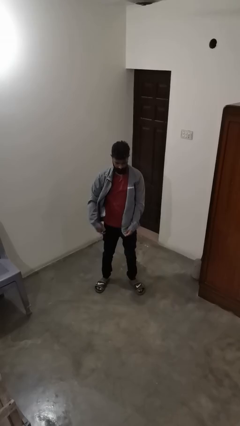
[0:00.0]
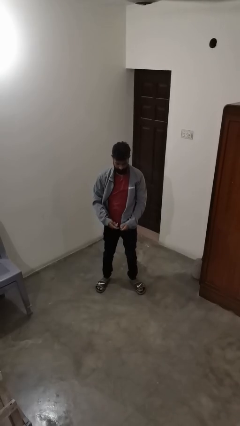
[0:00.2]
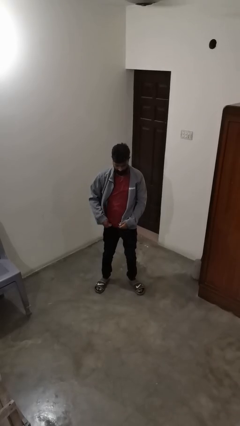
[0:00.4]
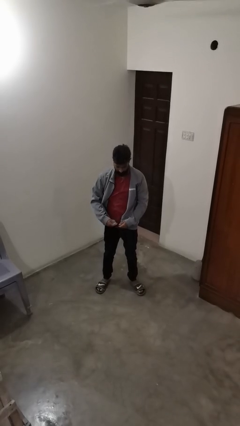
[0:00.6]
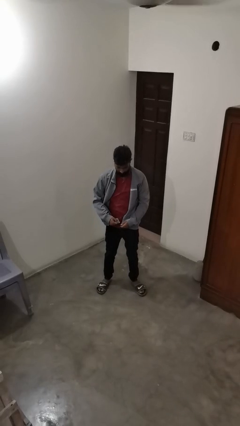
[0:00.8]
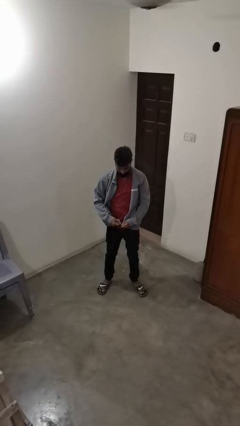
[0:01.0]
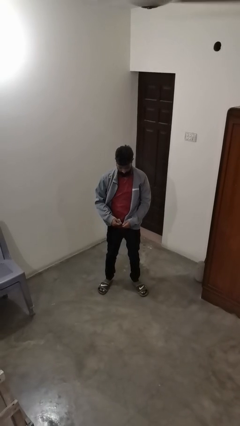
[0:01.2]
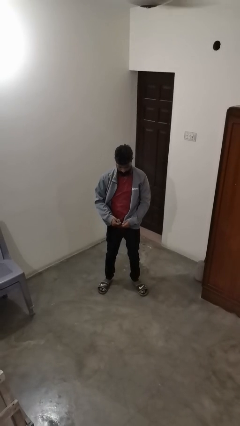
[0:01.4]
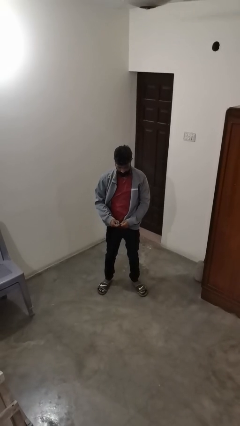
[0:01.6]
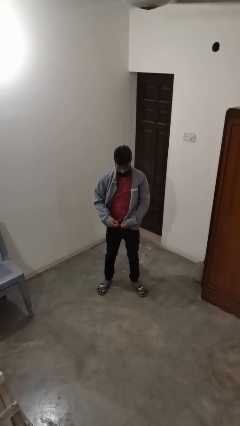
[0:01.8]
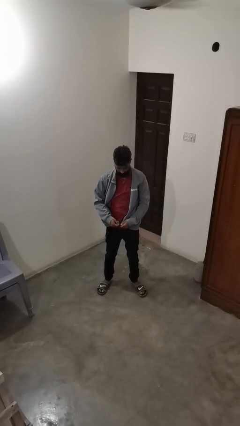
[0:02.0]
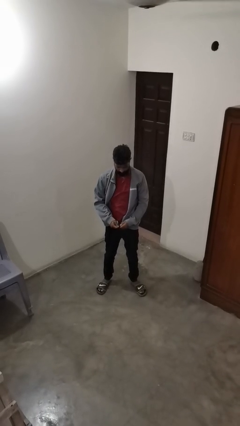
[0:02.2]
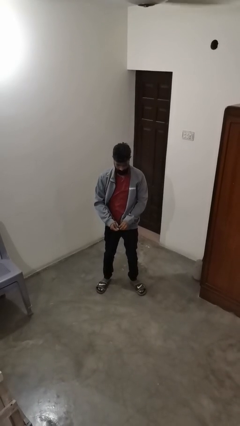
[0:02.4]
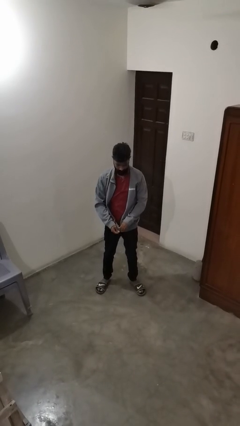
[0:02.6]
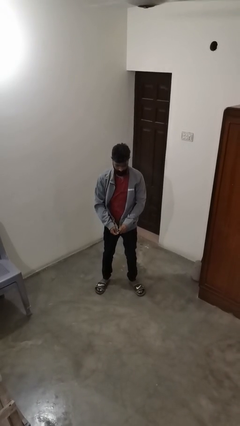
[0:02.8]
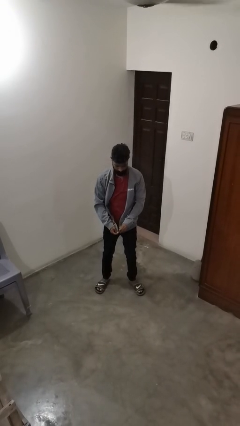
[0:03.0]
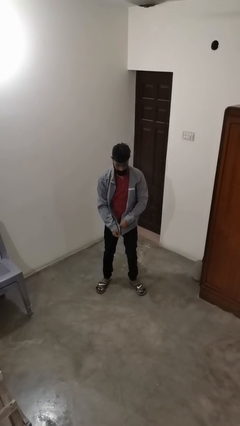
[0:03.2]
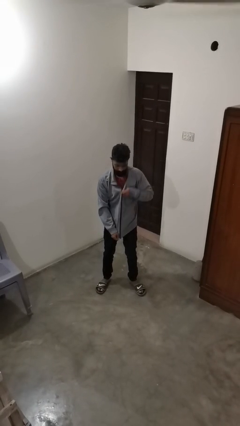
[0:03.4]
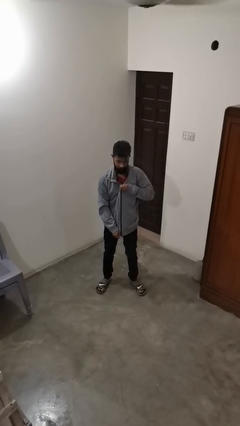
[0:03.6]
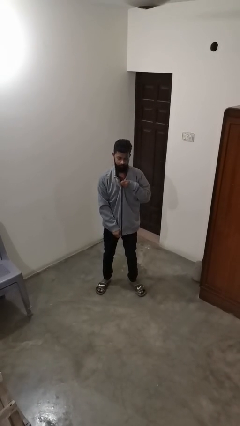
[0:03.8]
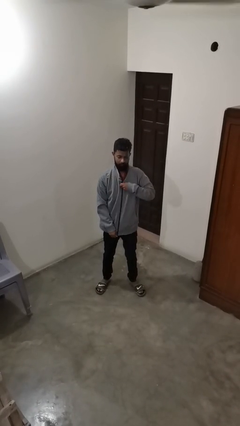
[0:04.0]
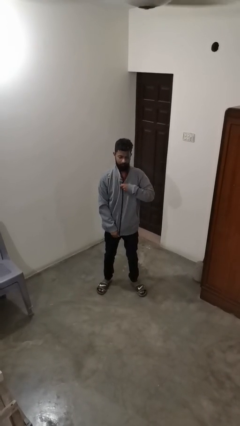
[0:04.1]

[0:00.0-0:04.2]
person zips up jacket

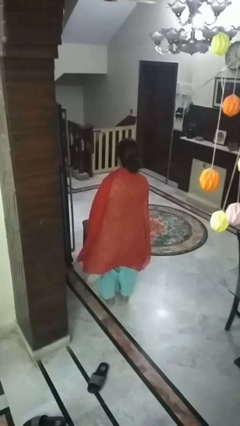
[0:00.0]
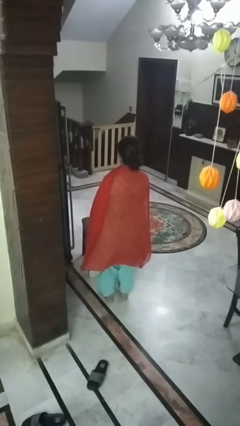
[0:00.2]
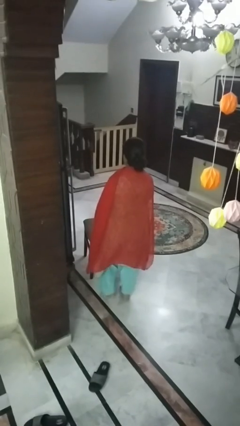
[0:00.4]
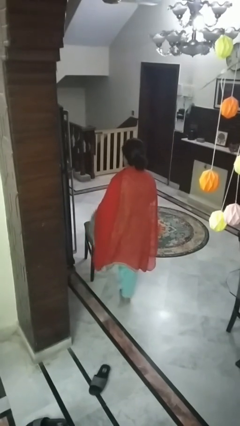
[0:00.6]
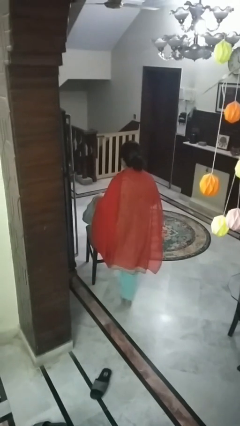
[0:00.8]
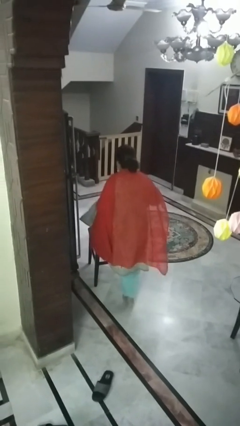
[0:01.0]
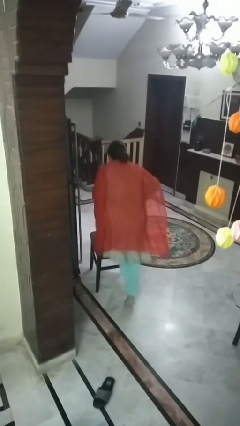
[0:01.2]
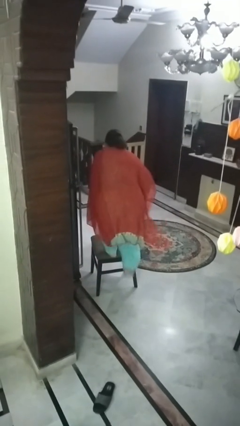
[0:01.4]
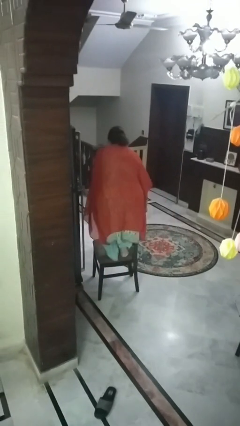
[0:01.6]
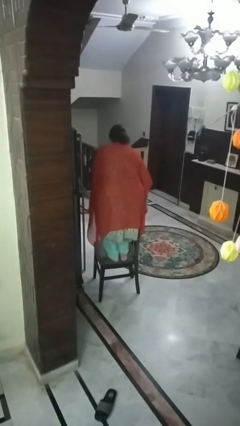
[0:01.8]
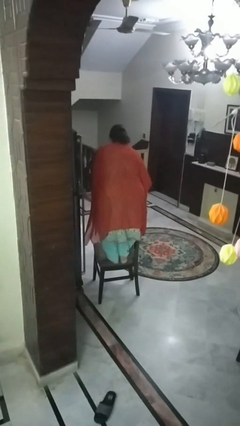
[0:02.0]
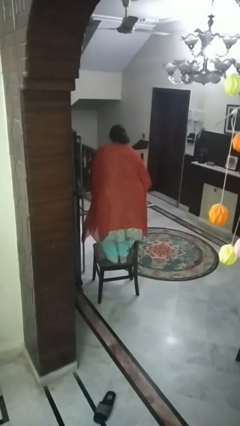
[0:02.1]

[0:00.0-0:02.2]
person climbs on chair

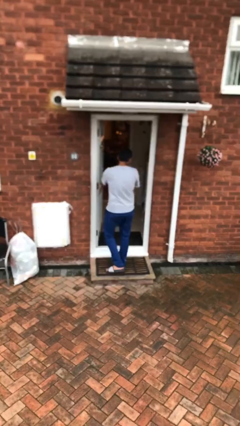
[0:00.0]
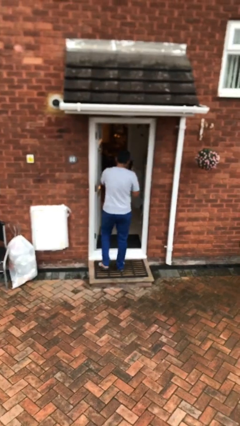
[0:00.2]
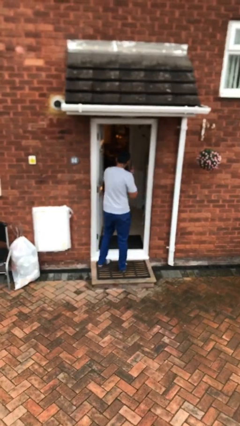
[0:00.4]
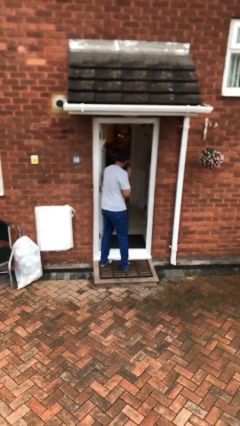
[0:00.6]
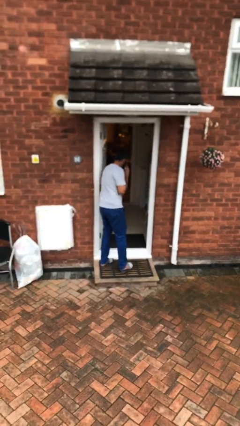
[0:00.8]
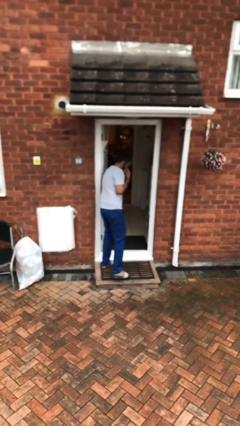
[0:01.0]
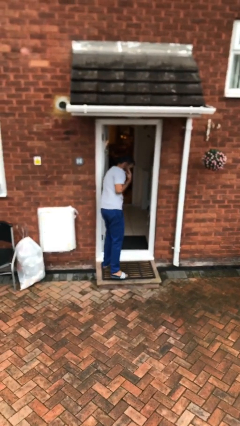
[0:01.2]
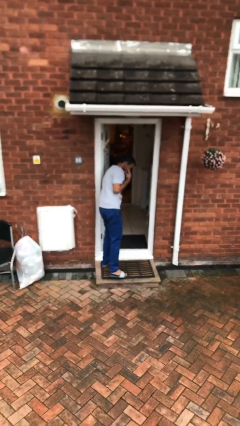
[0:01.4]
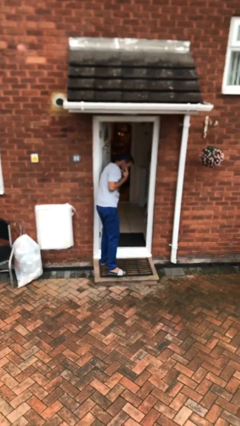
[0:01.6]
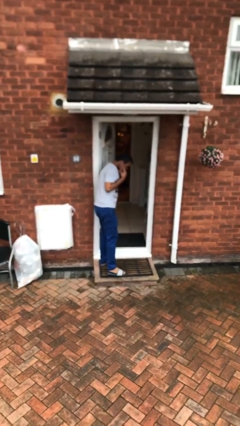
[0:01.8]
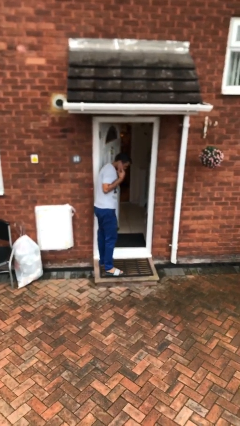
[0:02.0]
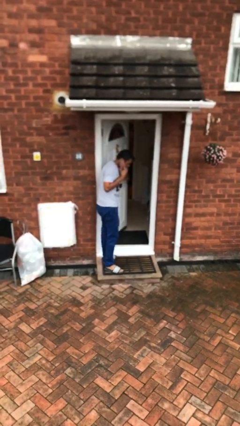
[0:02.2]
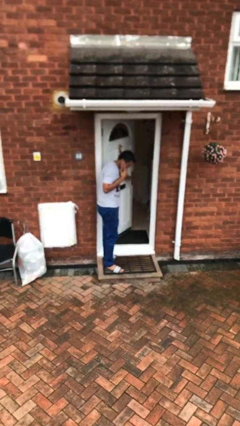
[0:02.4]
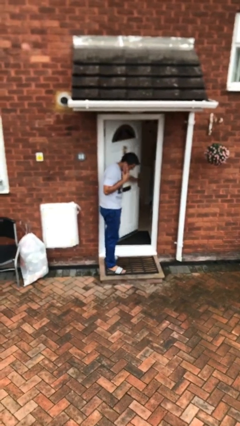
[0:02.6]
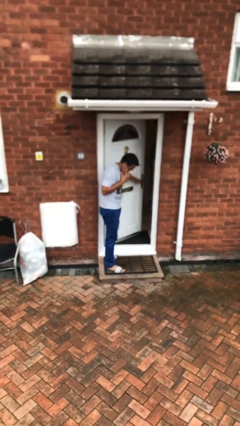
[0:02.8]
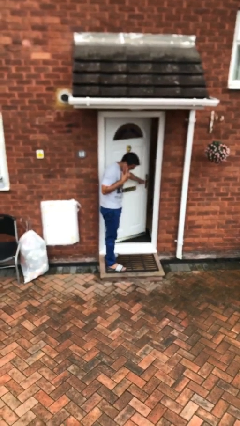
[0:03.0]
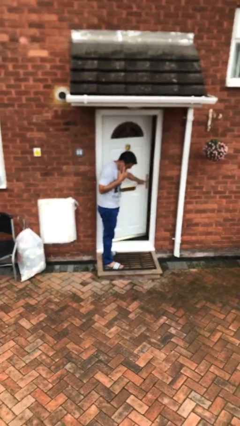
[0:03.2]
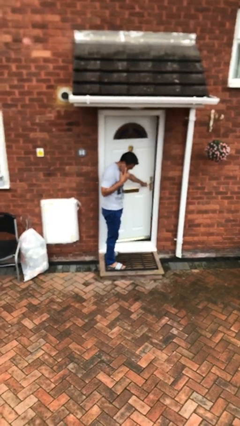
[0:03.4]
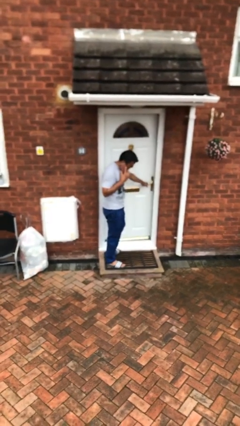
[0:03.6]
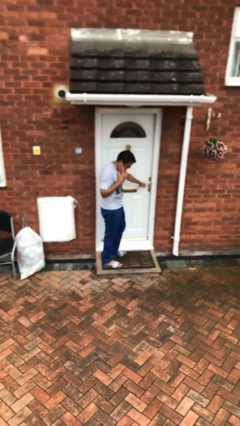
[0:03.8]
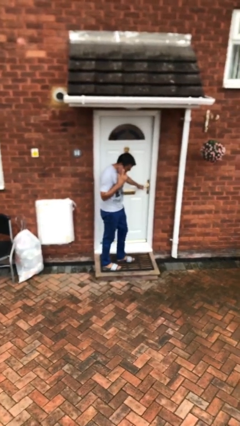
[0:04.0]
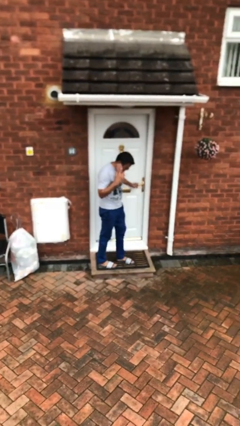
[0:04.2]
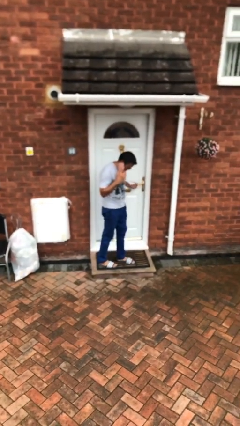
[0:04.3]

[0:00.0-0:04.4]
person closes facility door

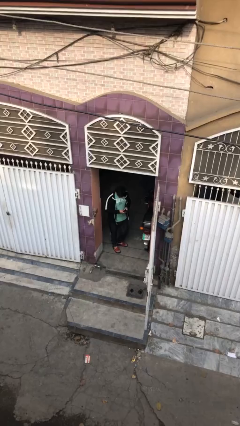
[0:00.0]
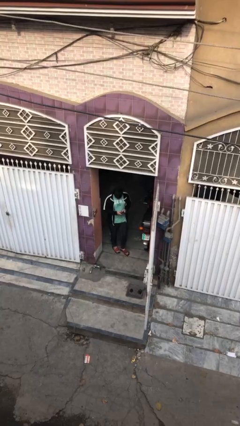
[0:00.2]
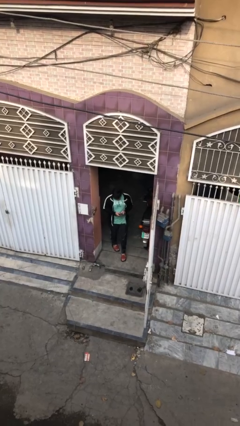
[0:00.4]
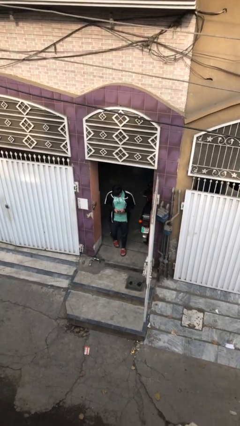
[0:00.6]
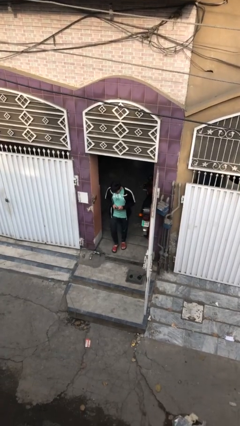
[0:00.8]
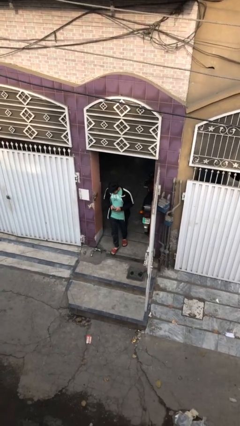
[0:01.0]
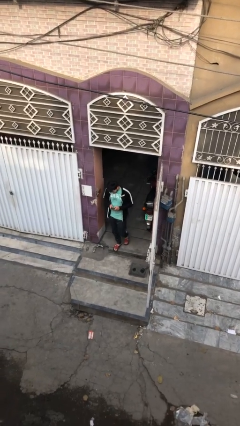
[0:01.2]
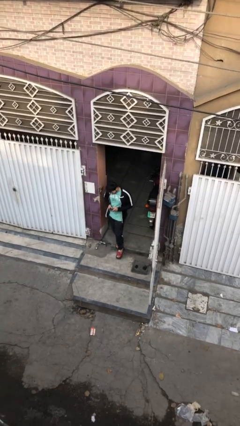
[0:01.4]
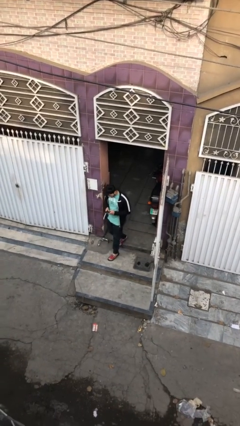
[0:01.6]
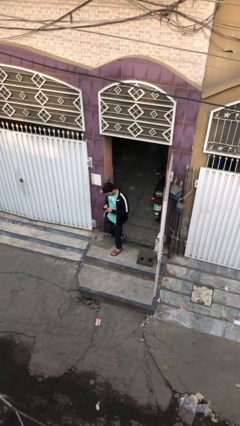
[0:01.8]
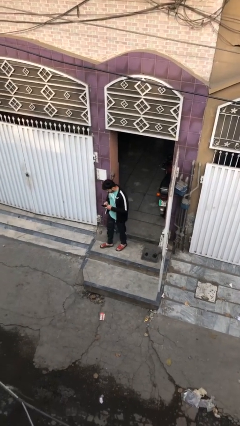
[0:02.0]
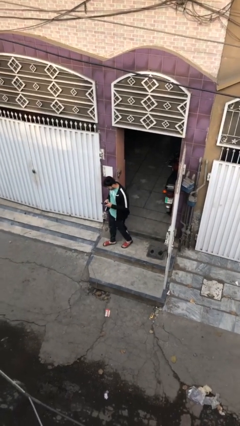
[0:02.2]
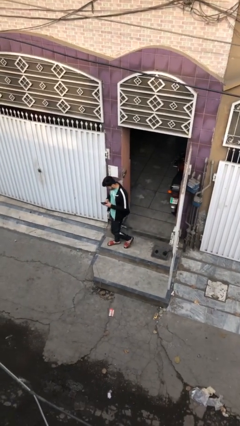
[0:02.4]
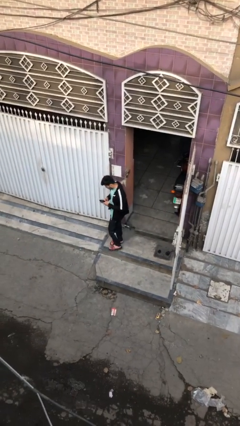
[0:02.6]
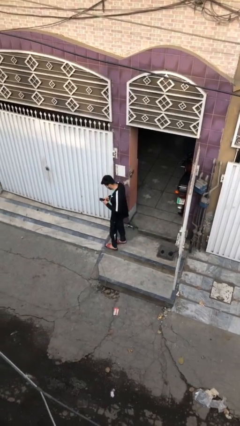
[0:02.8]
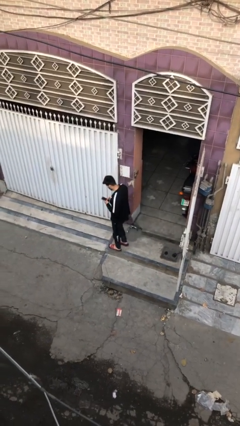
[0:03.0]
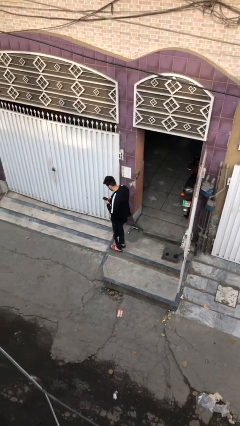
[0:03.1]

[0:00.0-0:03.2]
person enters scene through structure

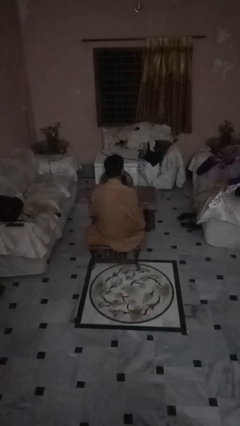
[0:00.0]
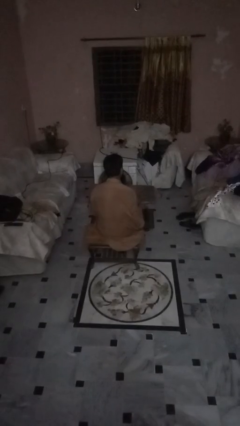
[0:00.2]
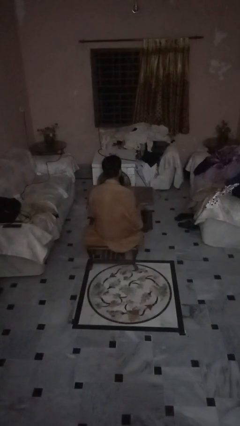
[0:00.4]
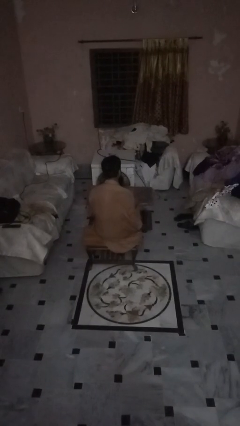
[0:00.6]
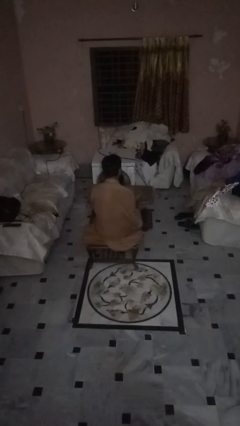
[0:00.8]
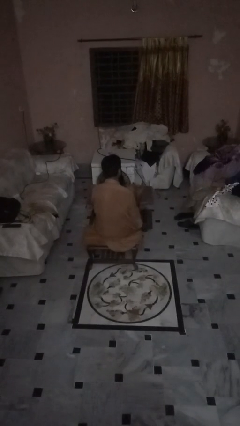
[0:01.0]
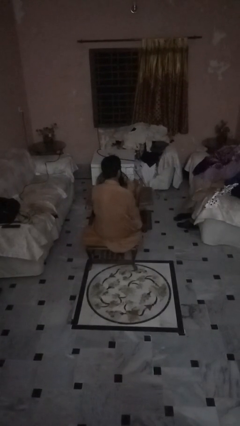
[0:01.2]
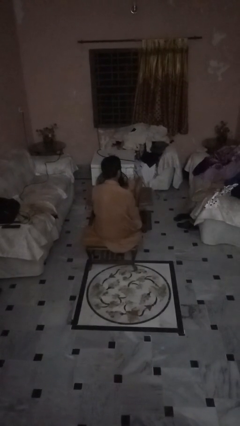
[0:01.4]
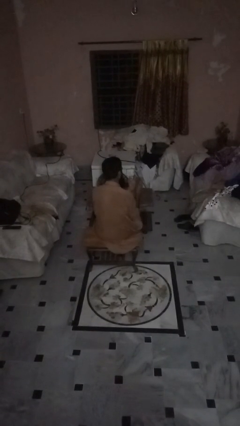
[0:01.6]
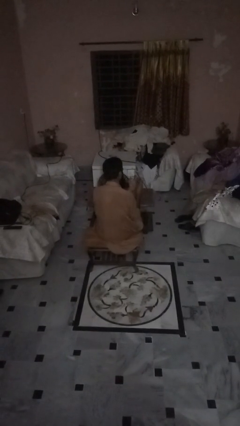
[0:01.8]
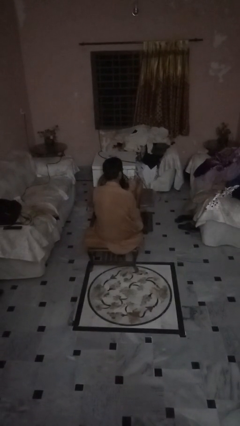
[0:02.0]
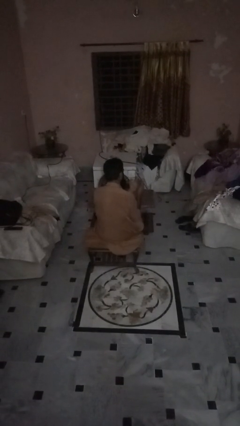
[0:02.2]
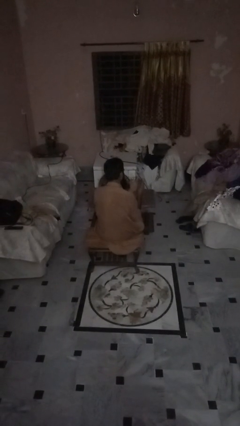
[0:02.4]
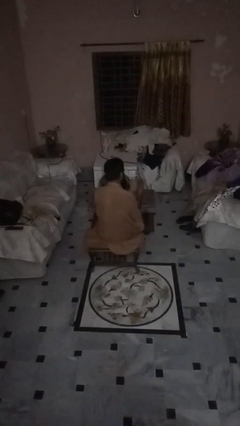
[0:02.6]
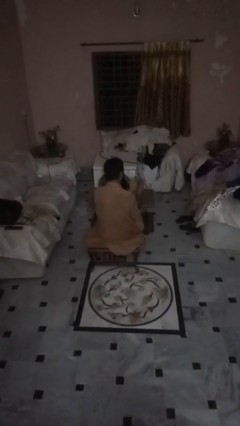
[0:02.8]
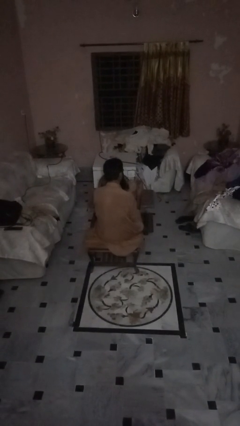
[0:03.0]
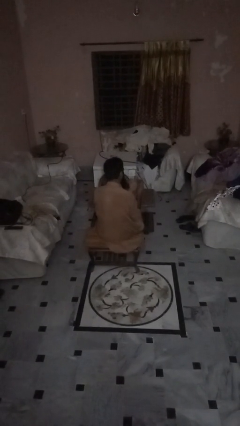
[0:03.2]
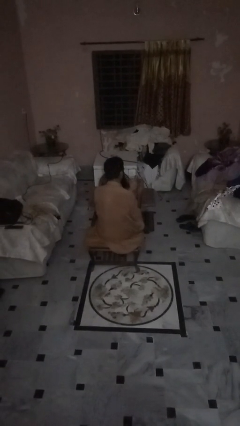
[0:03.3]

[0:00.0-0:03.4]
person clips fingernails

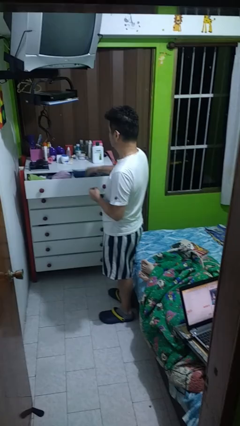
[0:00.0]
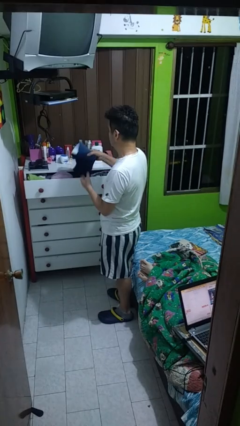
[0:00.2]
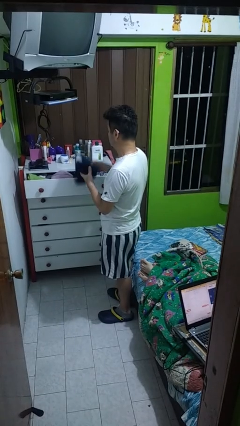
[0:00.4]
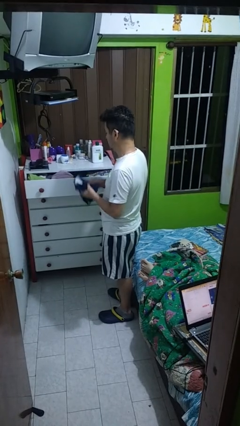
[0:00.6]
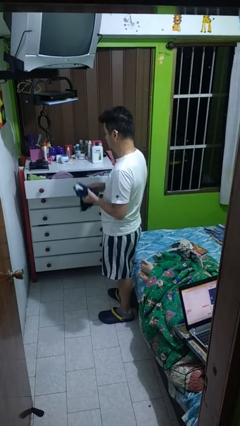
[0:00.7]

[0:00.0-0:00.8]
person takes clothes from dresser
